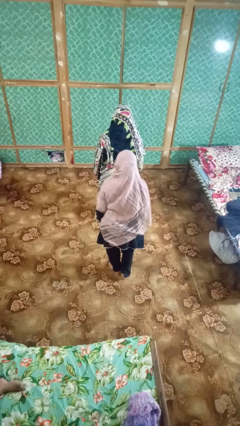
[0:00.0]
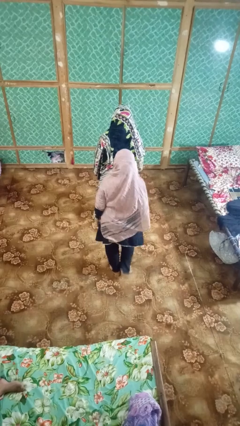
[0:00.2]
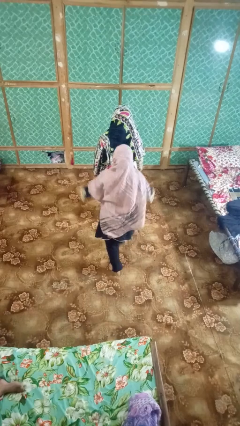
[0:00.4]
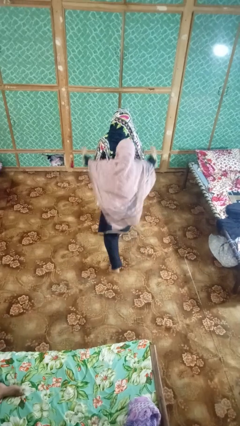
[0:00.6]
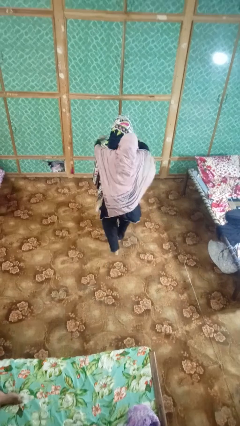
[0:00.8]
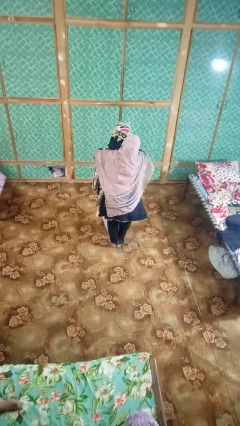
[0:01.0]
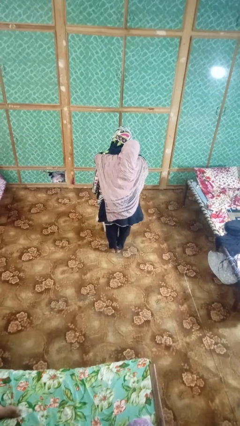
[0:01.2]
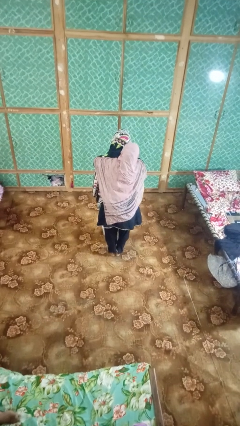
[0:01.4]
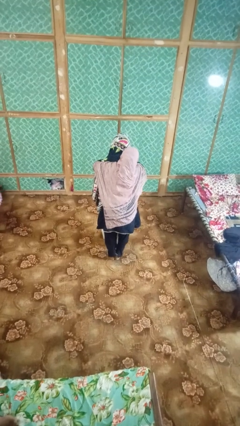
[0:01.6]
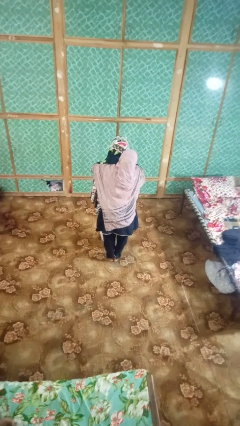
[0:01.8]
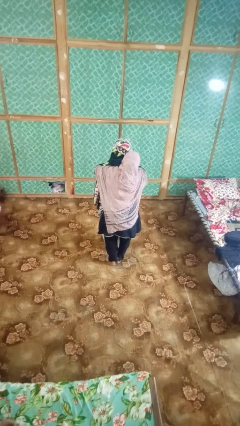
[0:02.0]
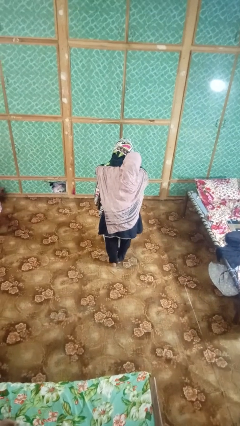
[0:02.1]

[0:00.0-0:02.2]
person hugs person from behind

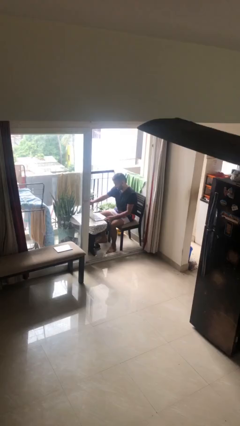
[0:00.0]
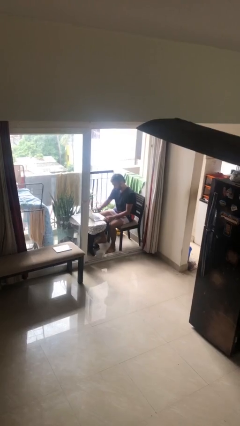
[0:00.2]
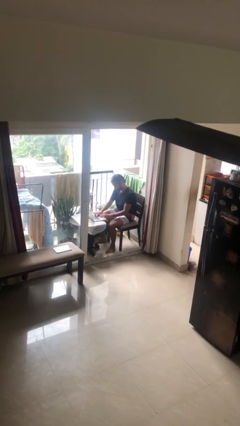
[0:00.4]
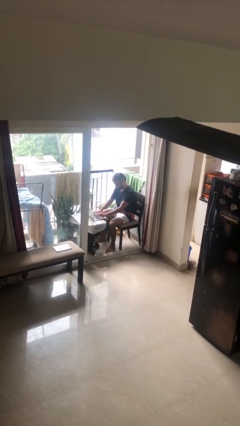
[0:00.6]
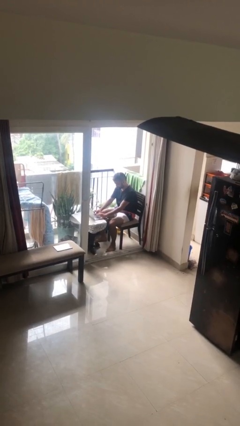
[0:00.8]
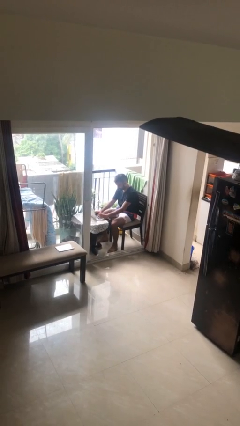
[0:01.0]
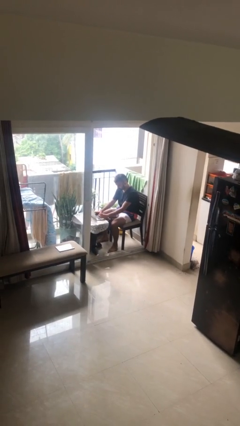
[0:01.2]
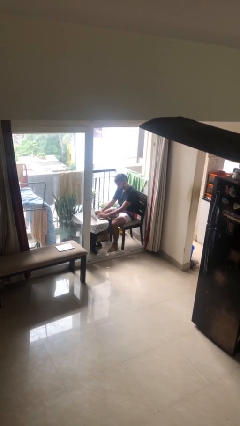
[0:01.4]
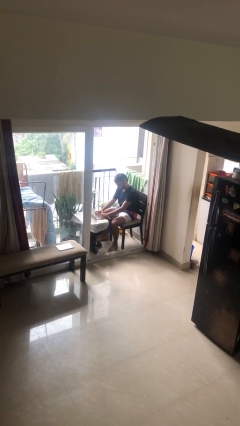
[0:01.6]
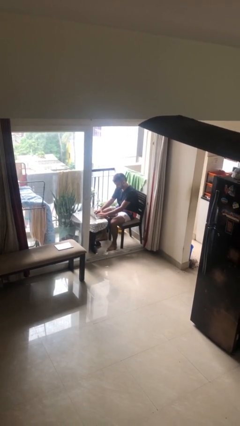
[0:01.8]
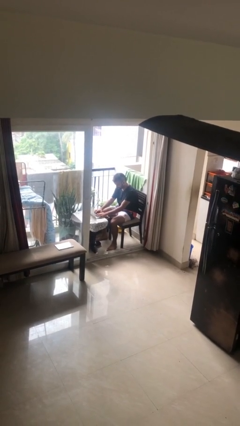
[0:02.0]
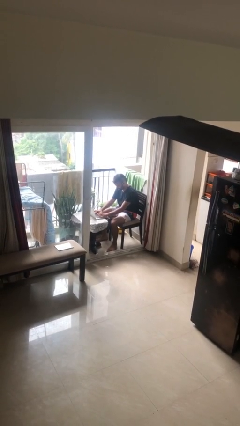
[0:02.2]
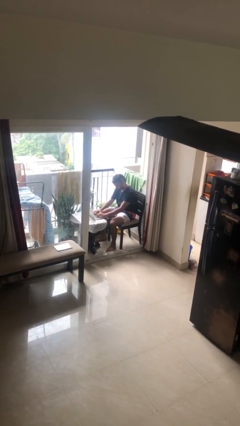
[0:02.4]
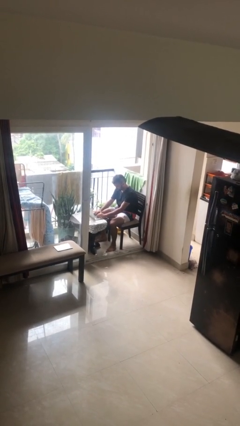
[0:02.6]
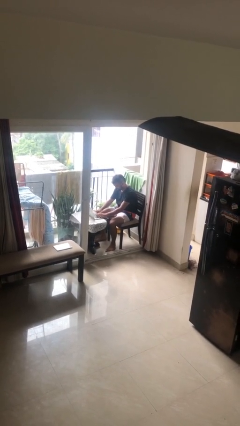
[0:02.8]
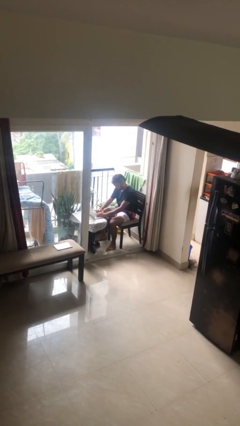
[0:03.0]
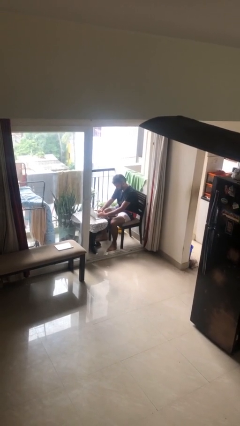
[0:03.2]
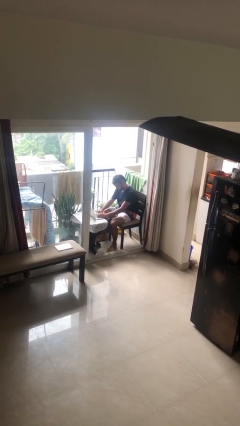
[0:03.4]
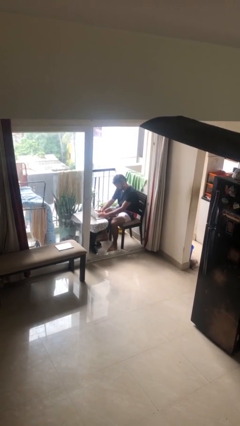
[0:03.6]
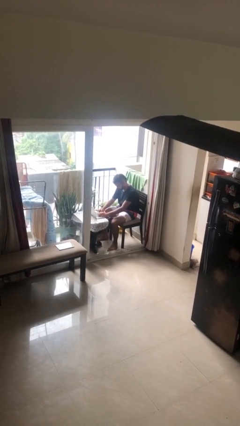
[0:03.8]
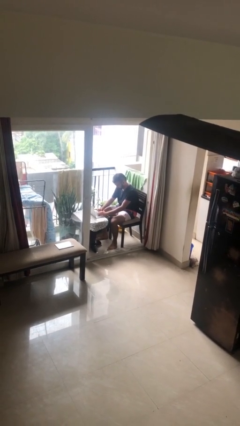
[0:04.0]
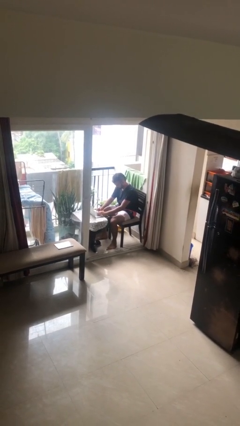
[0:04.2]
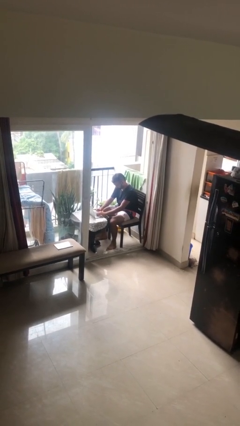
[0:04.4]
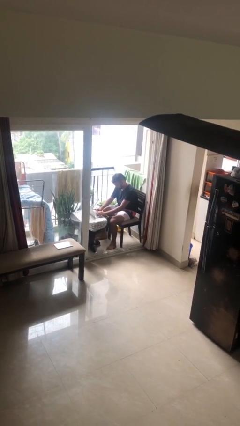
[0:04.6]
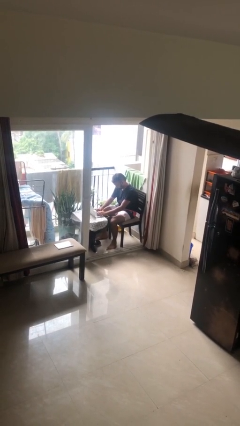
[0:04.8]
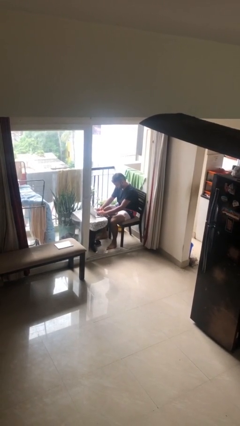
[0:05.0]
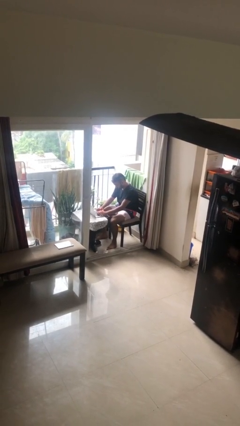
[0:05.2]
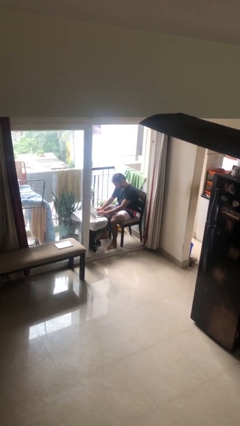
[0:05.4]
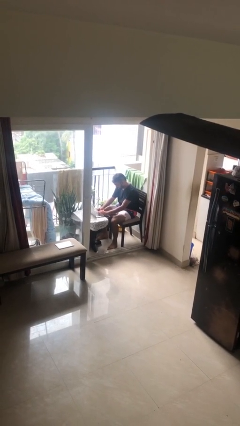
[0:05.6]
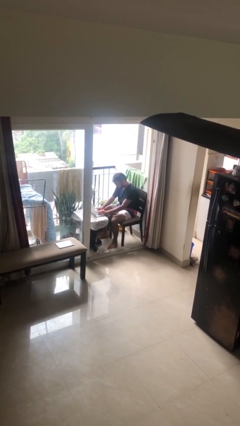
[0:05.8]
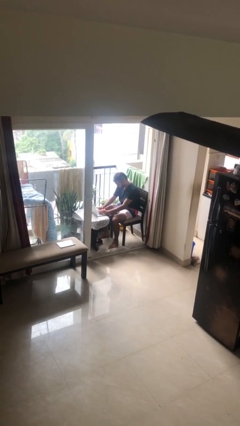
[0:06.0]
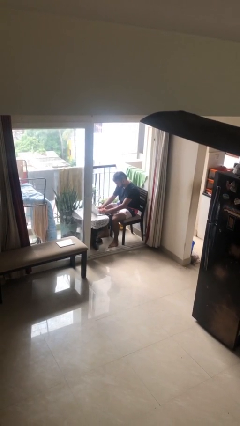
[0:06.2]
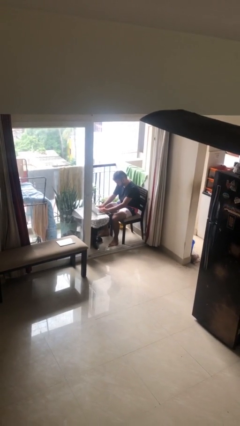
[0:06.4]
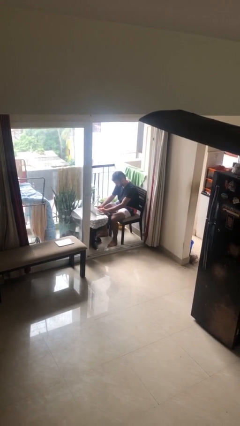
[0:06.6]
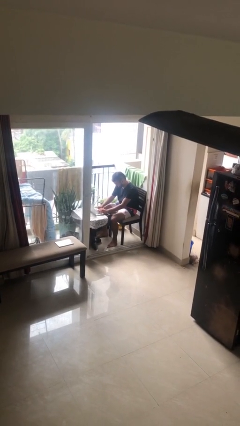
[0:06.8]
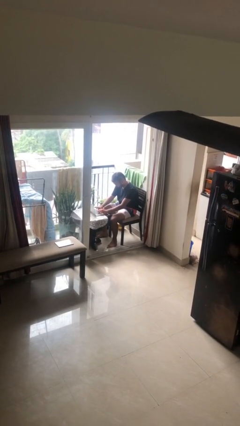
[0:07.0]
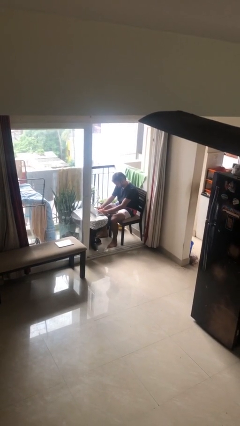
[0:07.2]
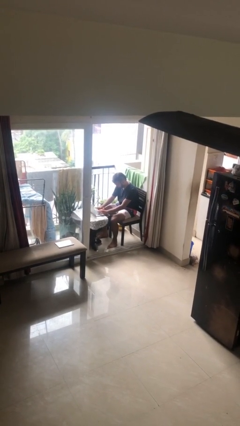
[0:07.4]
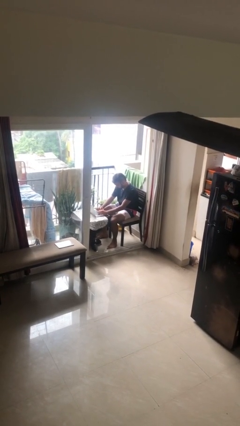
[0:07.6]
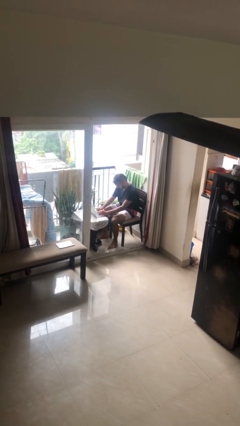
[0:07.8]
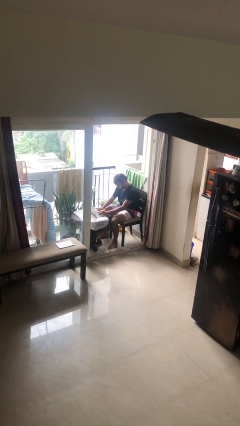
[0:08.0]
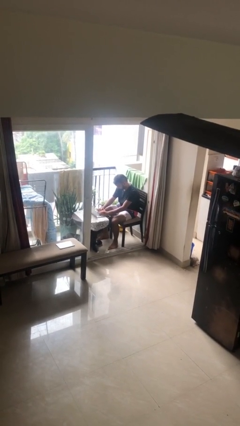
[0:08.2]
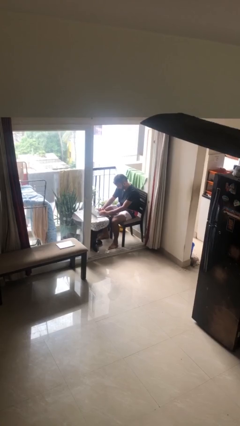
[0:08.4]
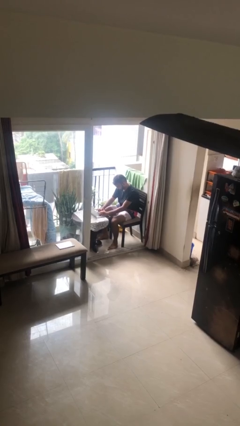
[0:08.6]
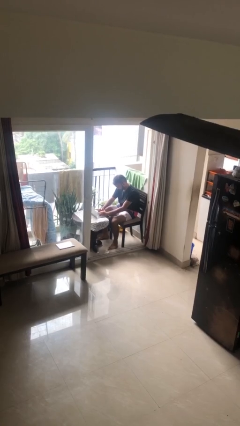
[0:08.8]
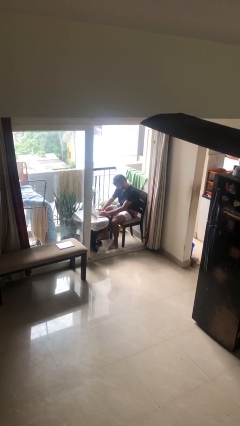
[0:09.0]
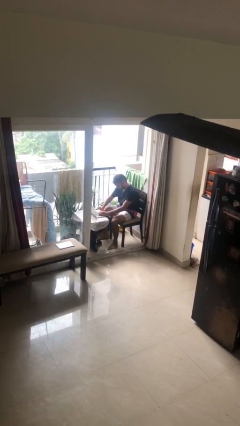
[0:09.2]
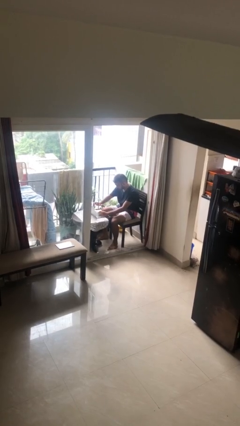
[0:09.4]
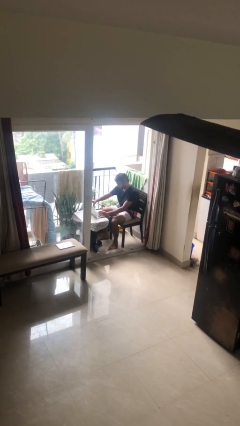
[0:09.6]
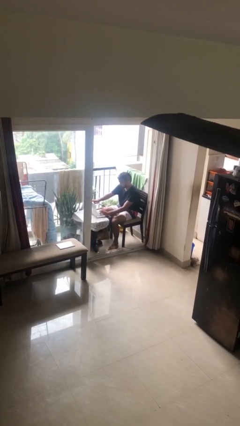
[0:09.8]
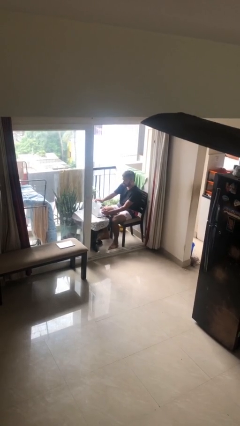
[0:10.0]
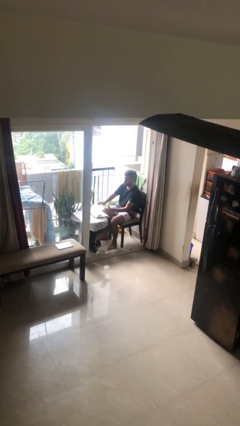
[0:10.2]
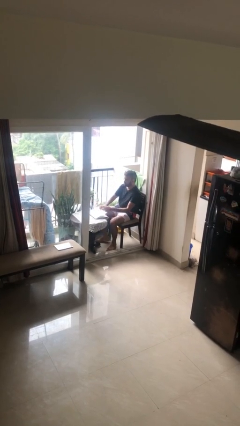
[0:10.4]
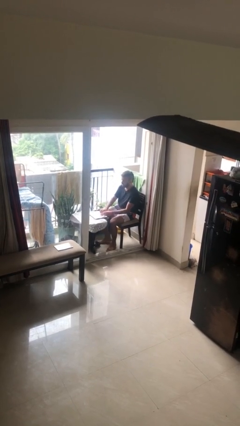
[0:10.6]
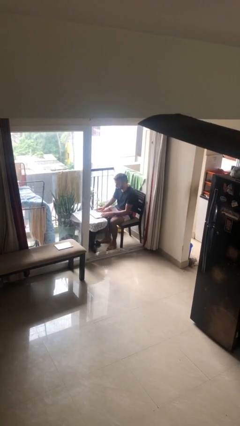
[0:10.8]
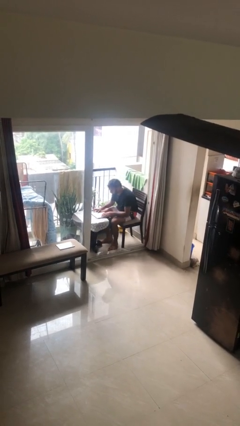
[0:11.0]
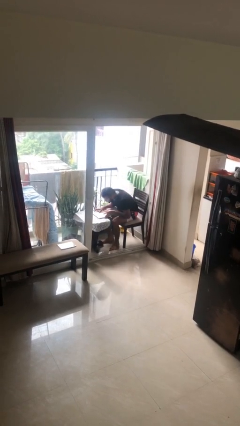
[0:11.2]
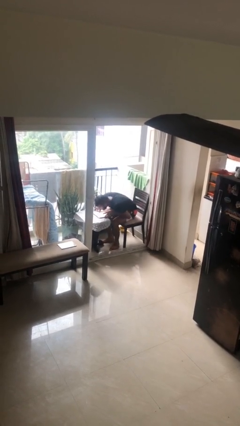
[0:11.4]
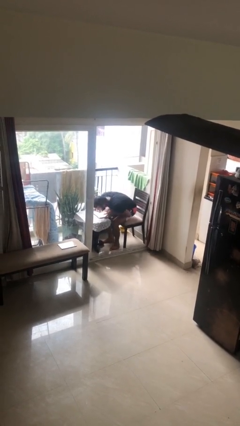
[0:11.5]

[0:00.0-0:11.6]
person interacts with laptop

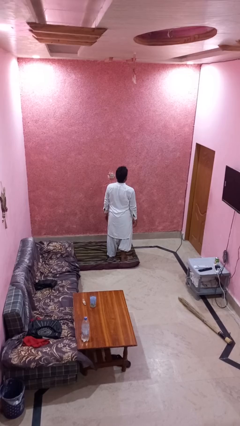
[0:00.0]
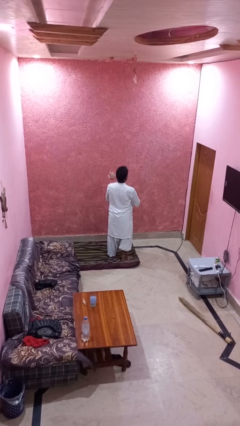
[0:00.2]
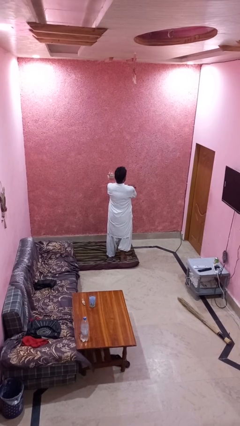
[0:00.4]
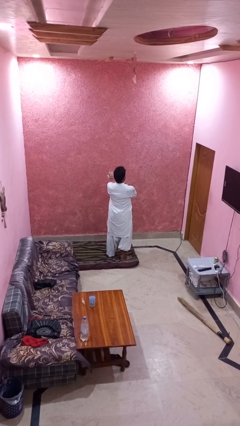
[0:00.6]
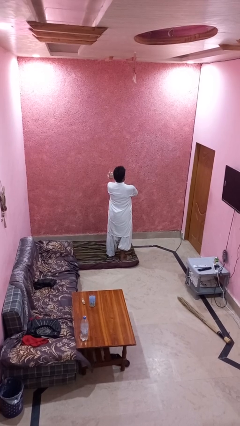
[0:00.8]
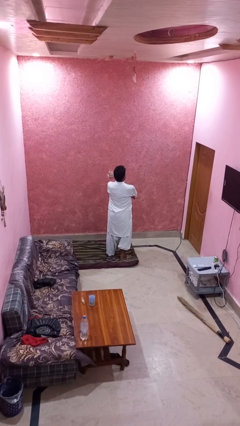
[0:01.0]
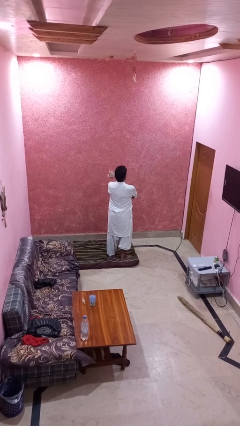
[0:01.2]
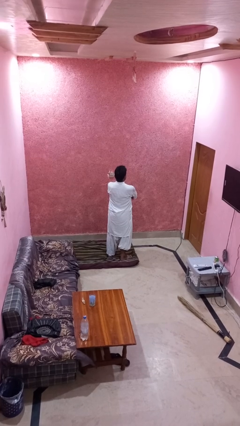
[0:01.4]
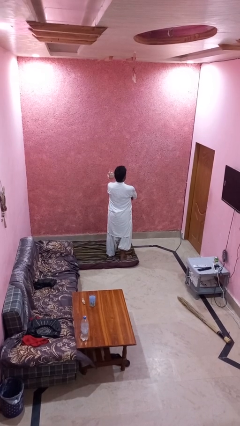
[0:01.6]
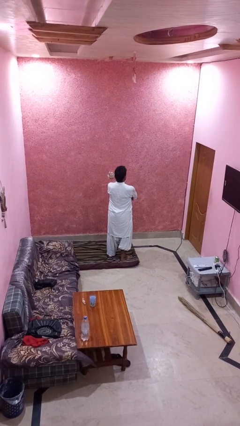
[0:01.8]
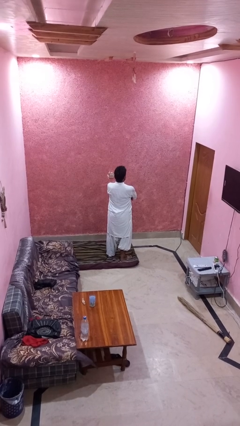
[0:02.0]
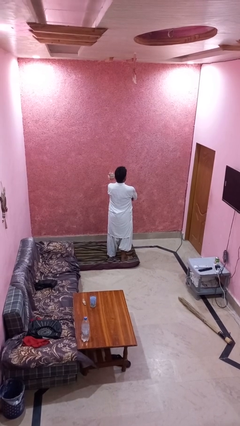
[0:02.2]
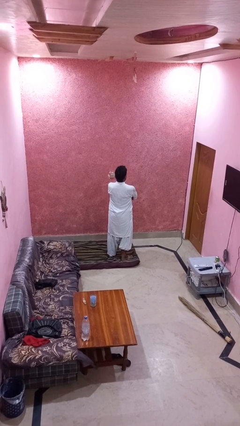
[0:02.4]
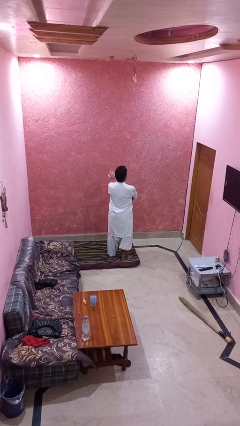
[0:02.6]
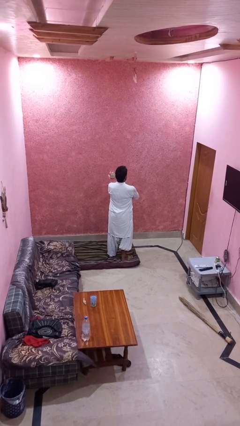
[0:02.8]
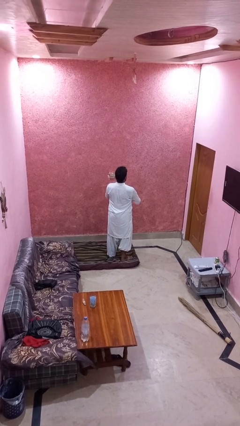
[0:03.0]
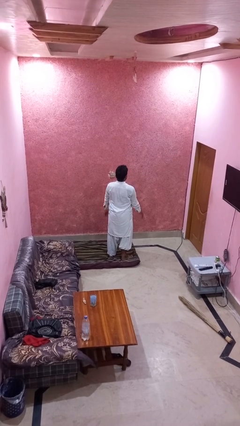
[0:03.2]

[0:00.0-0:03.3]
person crosses arms

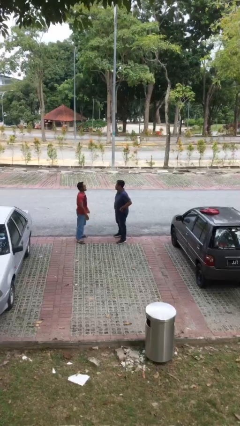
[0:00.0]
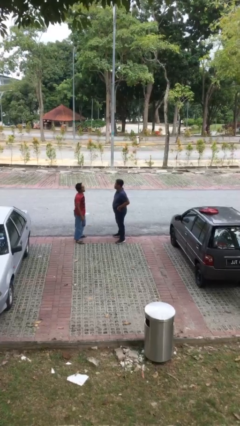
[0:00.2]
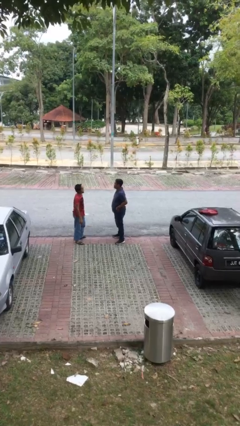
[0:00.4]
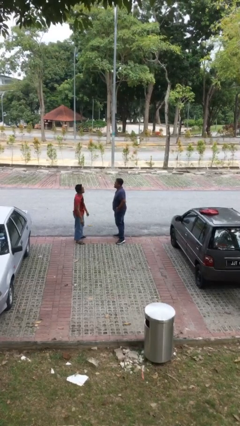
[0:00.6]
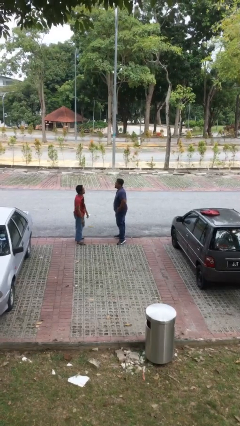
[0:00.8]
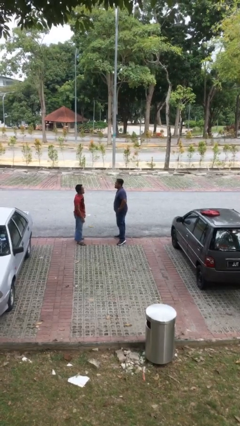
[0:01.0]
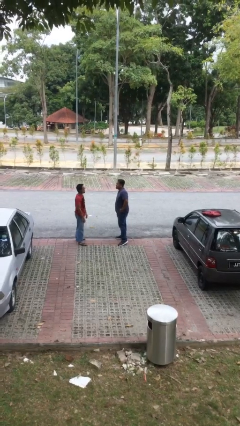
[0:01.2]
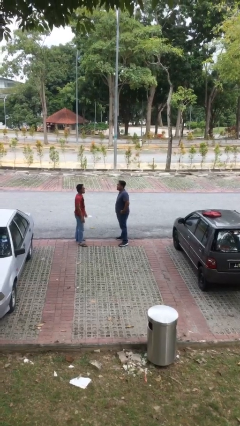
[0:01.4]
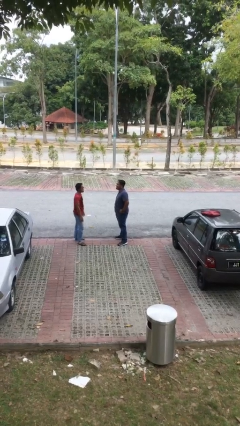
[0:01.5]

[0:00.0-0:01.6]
person talks to person
